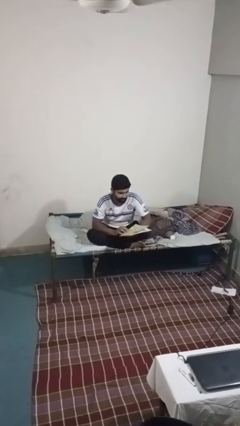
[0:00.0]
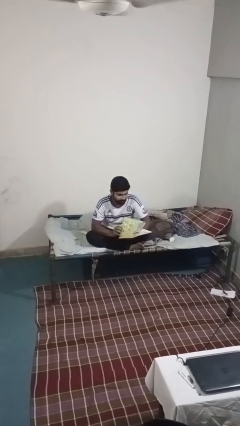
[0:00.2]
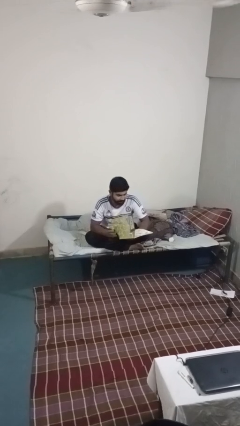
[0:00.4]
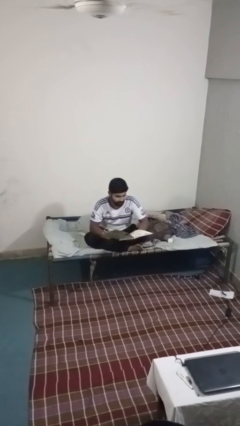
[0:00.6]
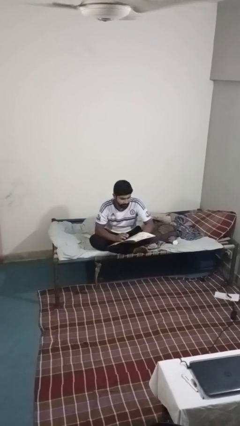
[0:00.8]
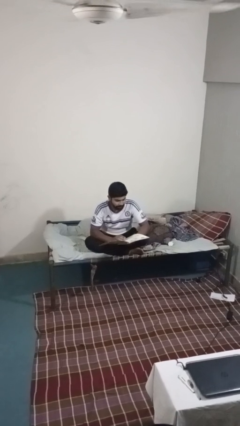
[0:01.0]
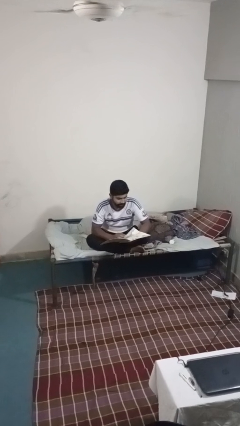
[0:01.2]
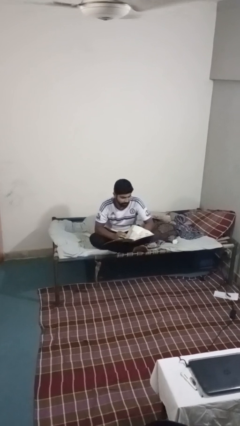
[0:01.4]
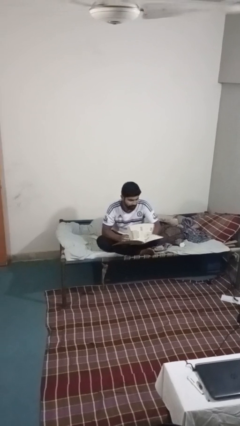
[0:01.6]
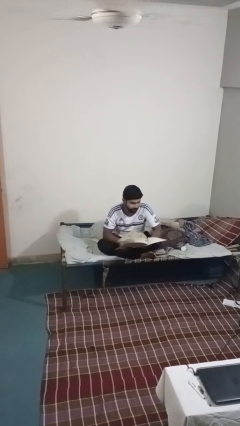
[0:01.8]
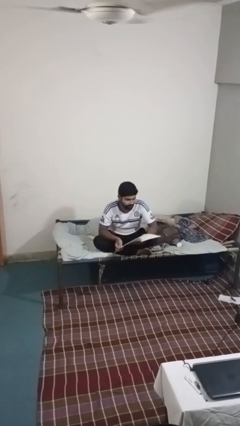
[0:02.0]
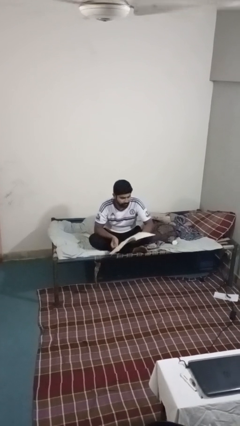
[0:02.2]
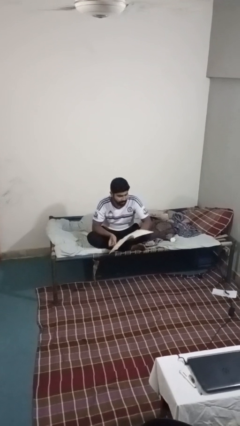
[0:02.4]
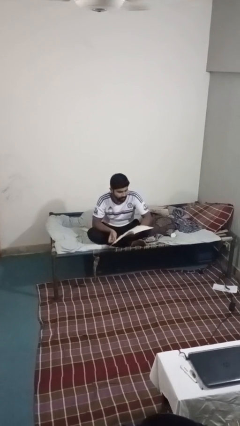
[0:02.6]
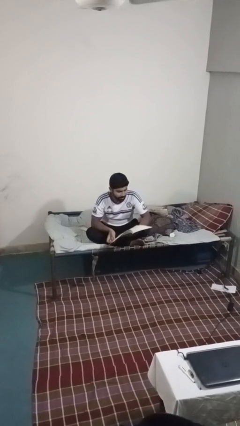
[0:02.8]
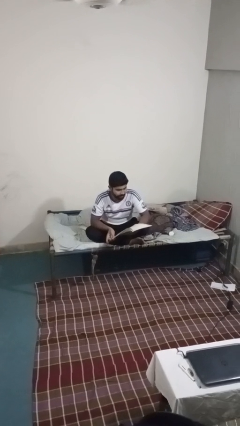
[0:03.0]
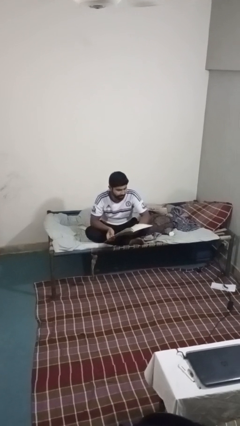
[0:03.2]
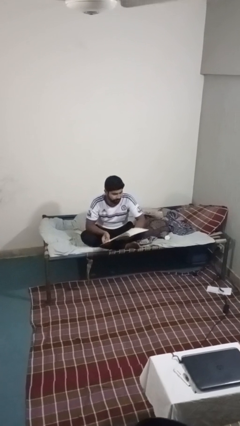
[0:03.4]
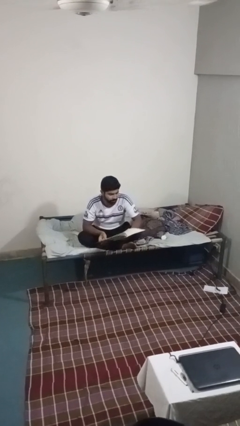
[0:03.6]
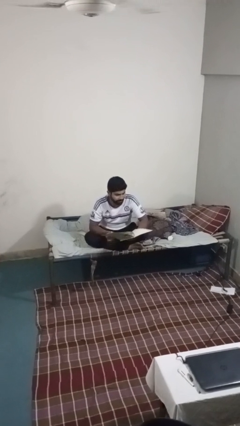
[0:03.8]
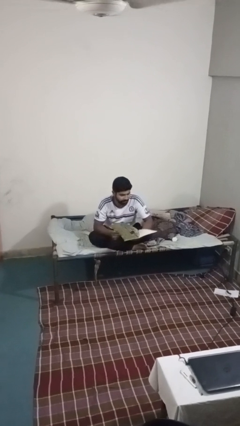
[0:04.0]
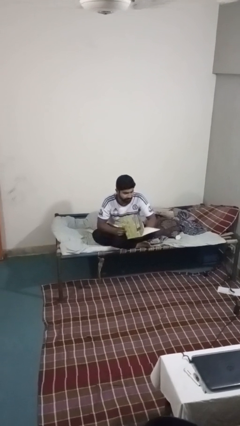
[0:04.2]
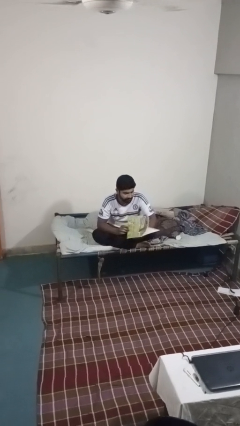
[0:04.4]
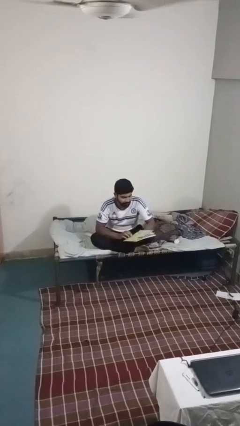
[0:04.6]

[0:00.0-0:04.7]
person reads magazine

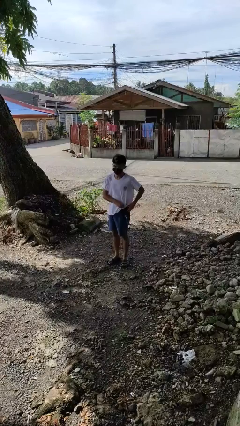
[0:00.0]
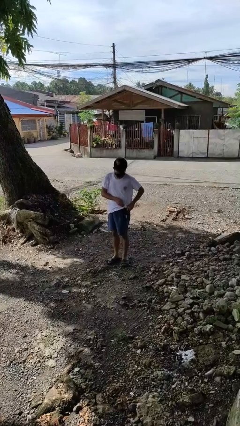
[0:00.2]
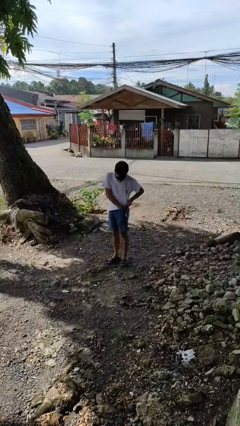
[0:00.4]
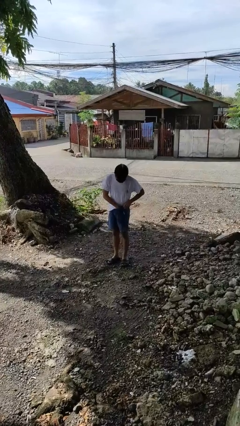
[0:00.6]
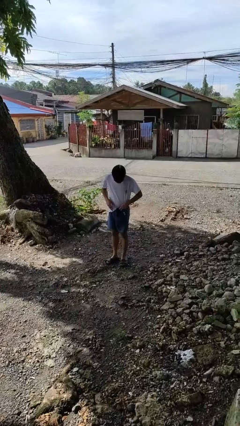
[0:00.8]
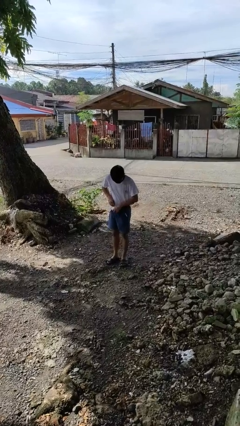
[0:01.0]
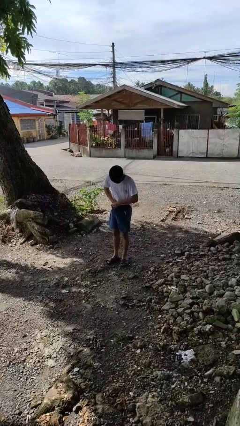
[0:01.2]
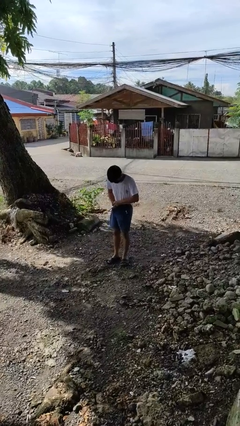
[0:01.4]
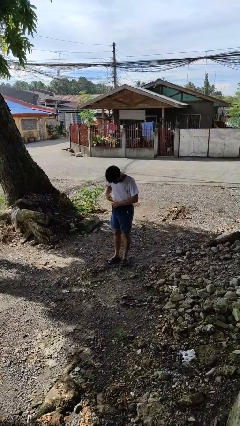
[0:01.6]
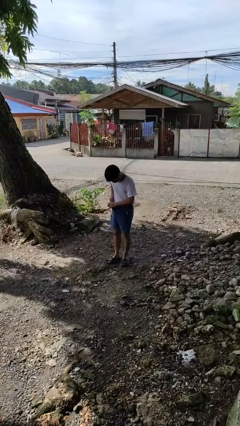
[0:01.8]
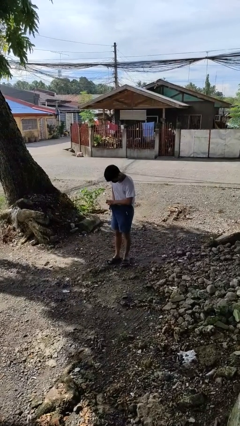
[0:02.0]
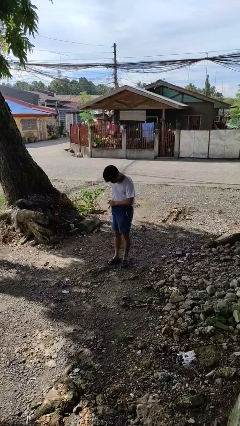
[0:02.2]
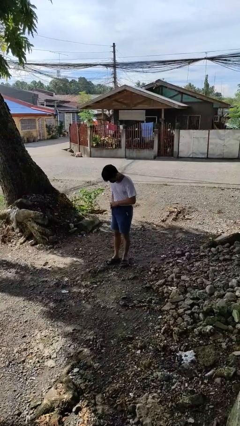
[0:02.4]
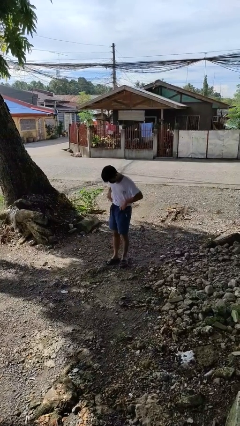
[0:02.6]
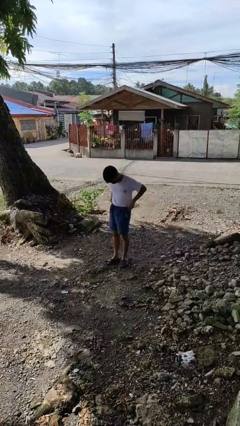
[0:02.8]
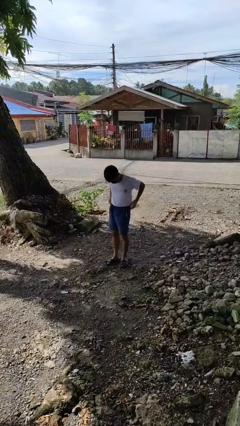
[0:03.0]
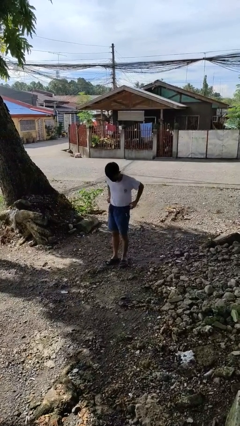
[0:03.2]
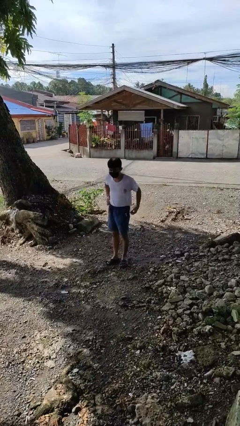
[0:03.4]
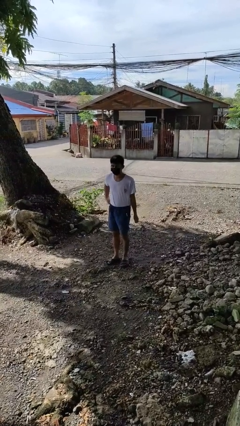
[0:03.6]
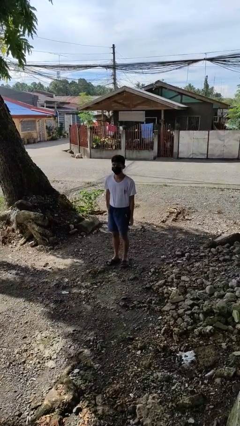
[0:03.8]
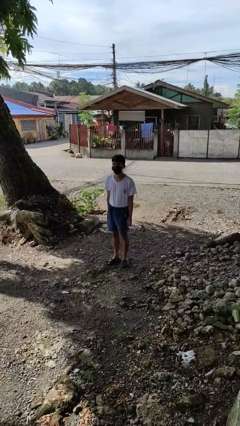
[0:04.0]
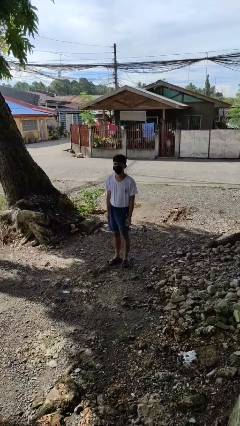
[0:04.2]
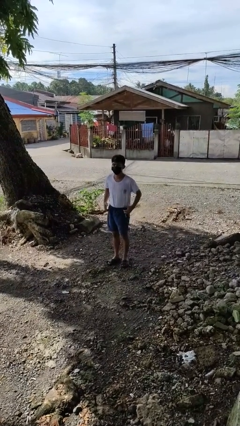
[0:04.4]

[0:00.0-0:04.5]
person tucks in shirt

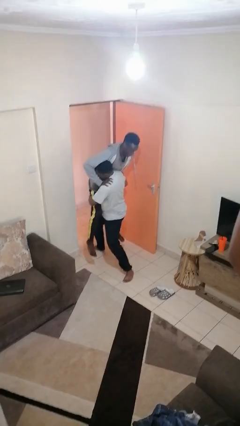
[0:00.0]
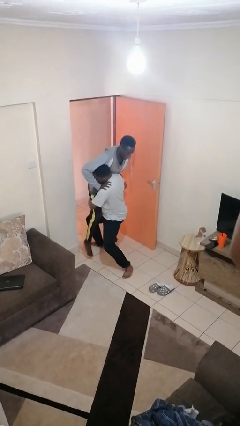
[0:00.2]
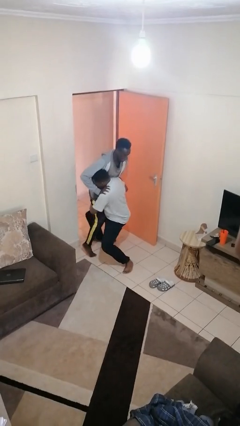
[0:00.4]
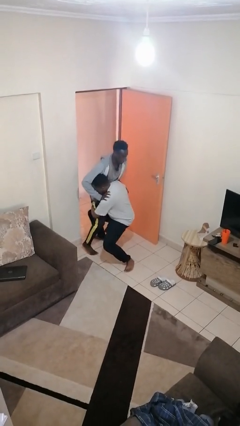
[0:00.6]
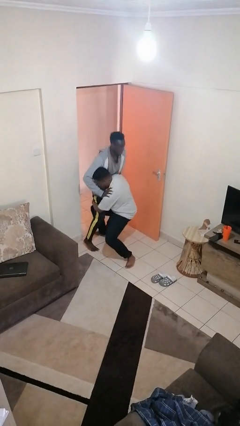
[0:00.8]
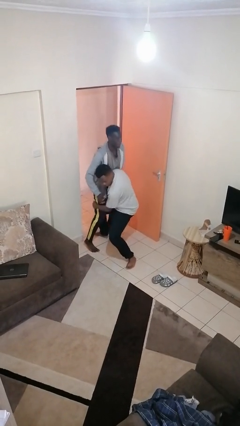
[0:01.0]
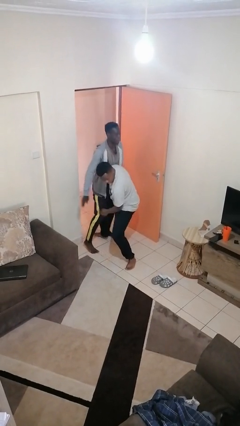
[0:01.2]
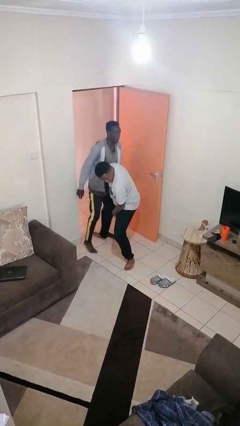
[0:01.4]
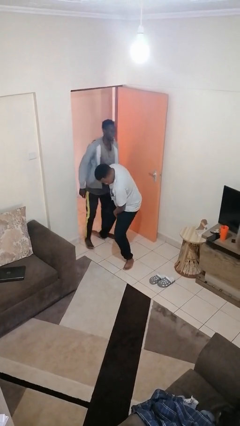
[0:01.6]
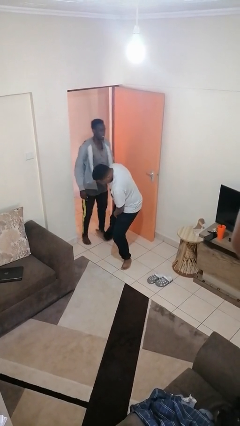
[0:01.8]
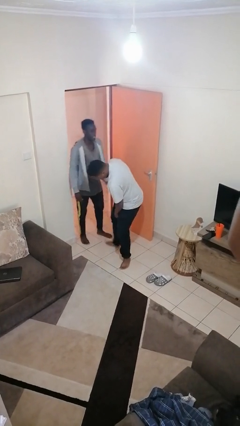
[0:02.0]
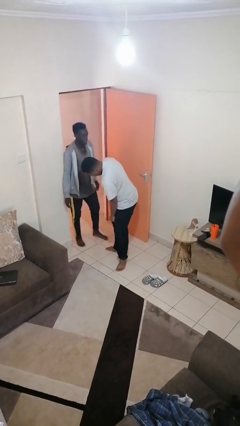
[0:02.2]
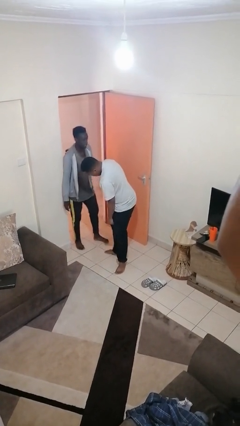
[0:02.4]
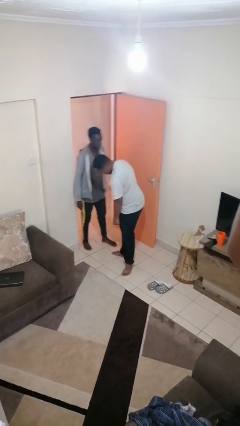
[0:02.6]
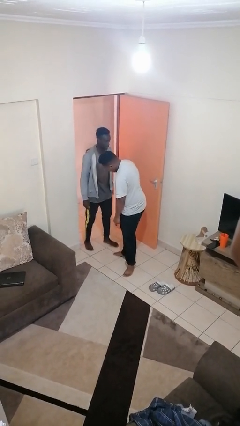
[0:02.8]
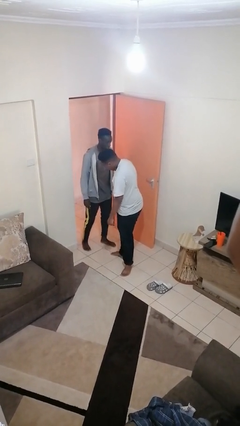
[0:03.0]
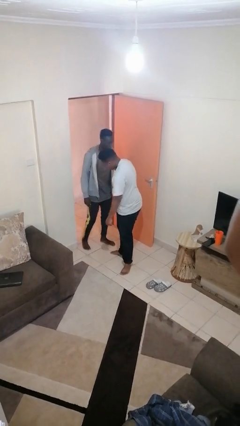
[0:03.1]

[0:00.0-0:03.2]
person puts down person

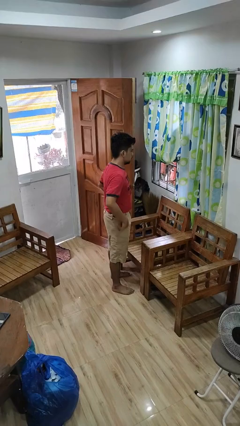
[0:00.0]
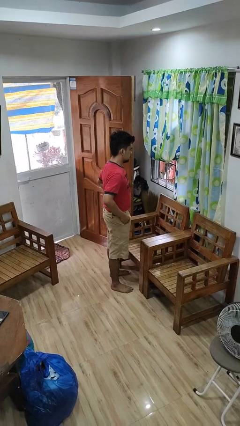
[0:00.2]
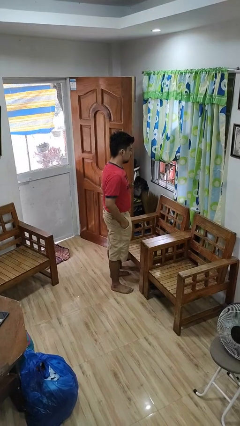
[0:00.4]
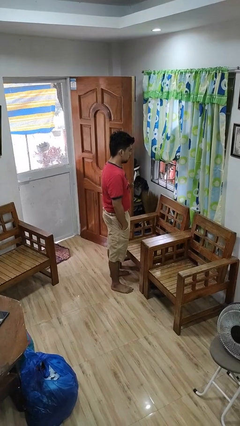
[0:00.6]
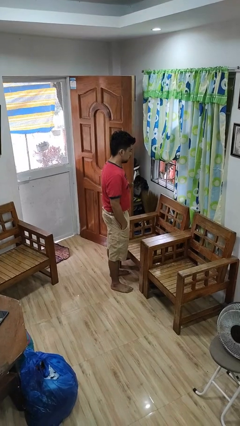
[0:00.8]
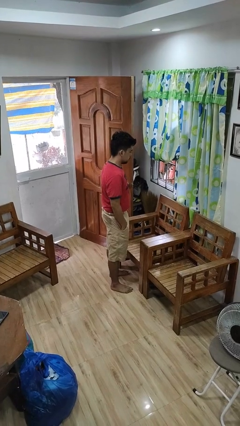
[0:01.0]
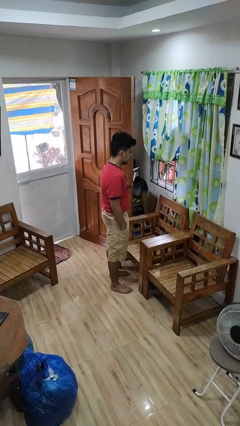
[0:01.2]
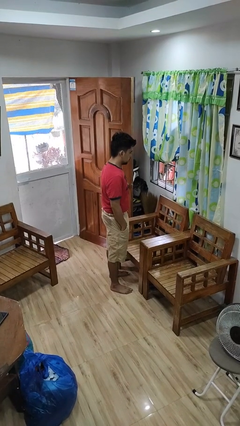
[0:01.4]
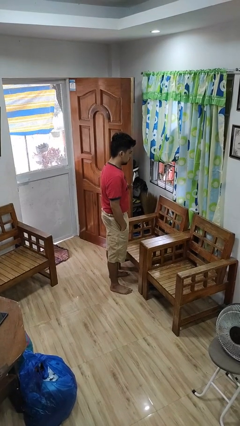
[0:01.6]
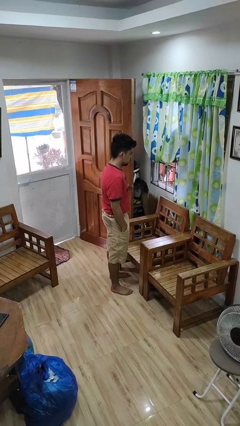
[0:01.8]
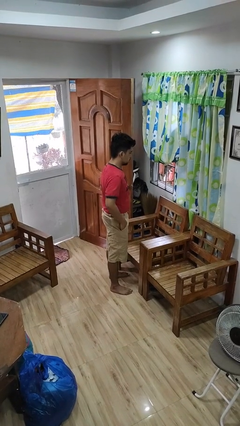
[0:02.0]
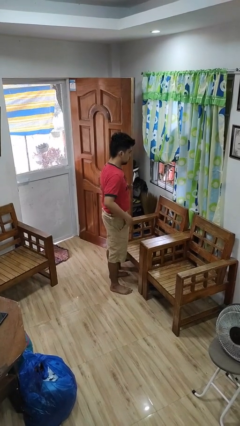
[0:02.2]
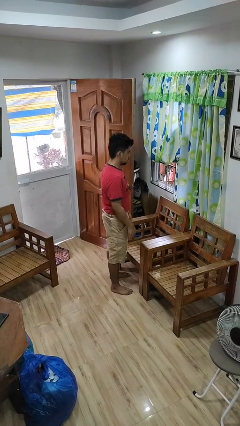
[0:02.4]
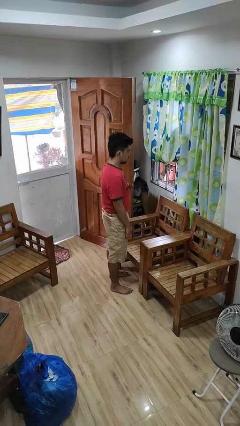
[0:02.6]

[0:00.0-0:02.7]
person puts hands in back pockets

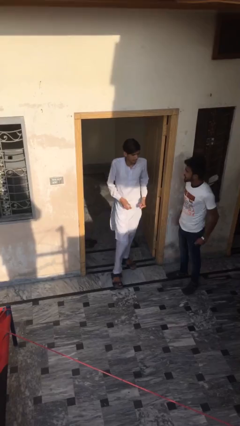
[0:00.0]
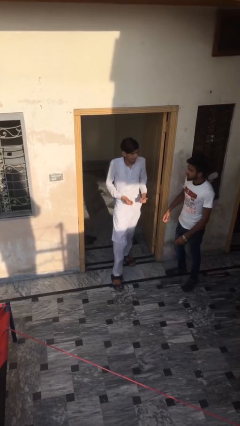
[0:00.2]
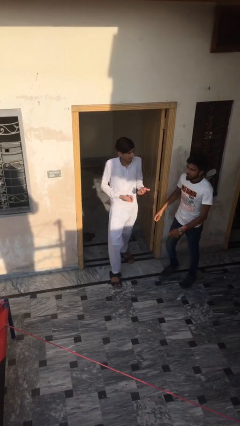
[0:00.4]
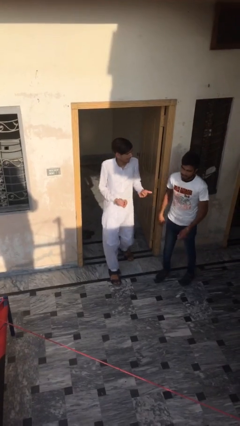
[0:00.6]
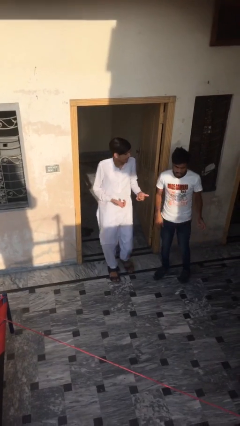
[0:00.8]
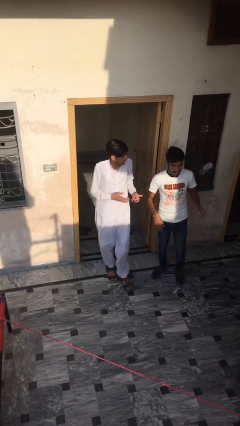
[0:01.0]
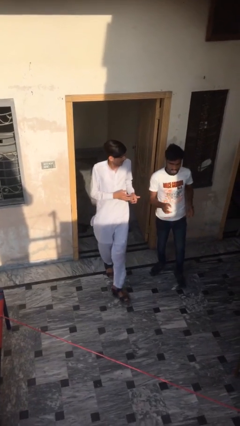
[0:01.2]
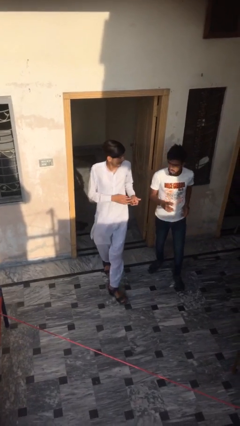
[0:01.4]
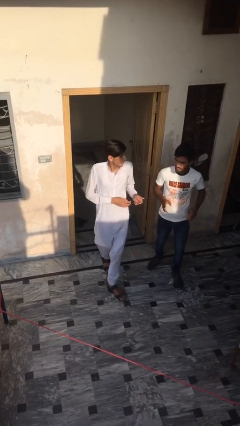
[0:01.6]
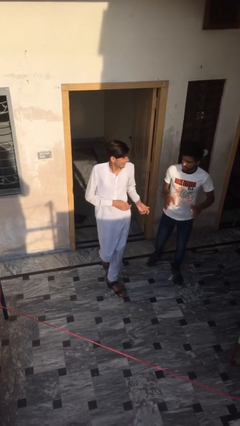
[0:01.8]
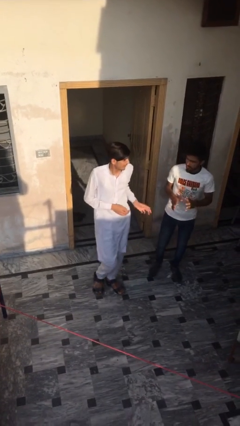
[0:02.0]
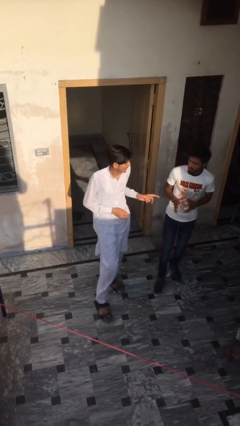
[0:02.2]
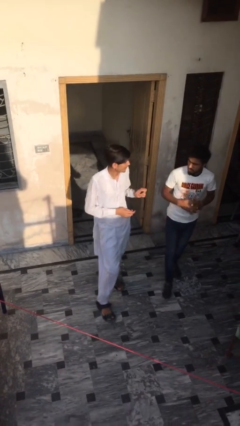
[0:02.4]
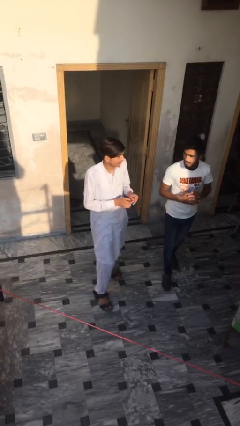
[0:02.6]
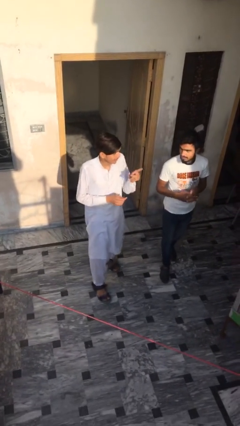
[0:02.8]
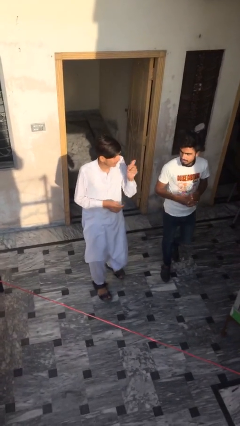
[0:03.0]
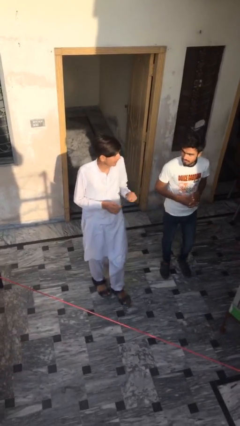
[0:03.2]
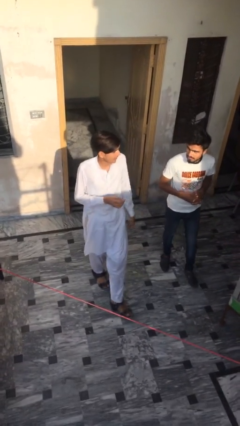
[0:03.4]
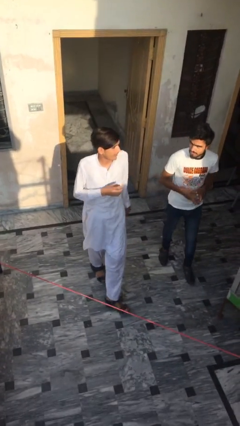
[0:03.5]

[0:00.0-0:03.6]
person talks to person
